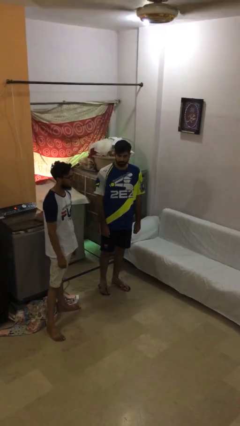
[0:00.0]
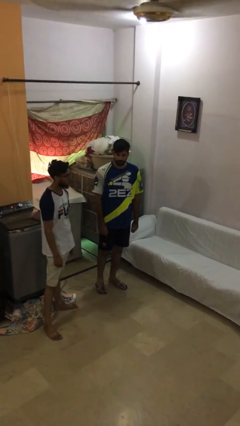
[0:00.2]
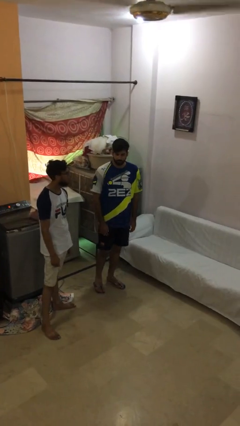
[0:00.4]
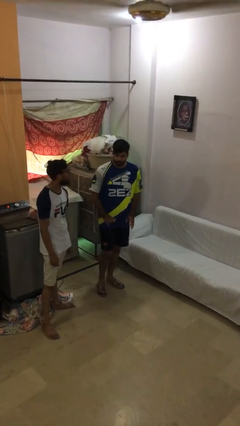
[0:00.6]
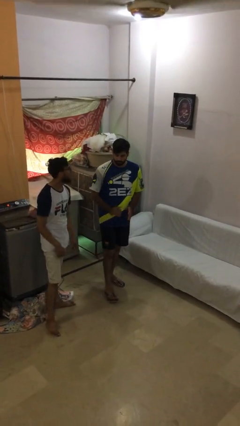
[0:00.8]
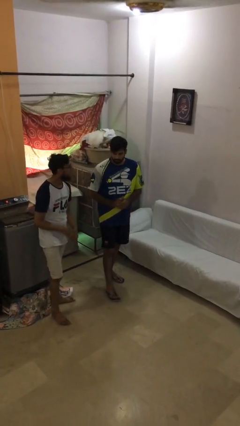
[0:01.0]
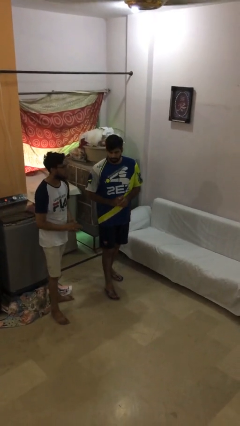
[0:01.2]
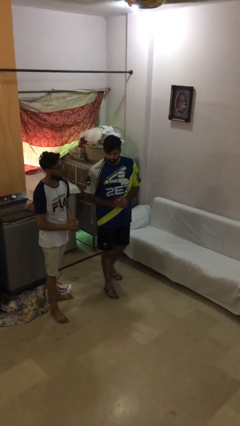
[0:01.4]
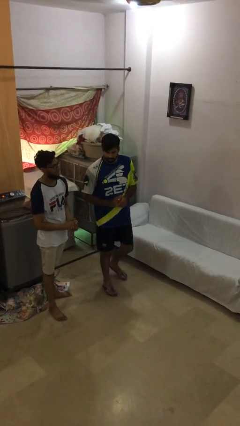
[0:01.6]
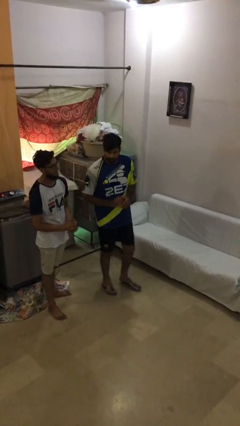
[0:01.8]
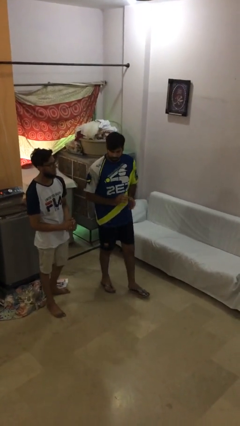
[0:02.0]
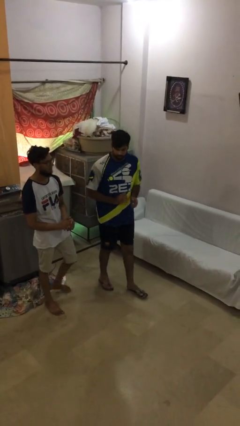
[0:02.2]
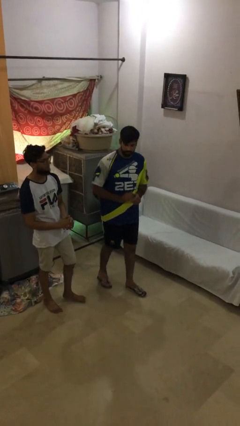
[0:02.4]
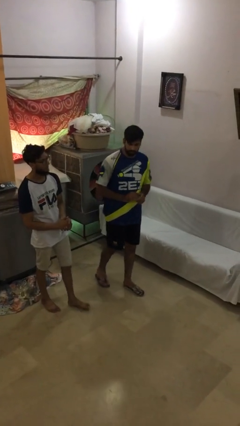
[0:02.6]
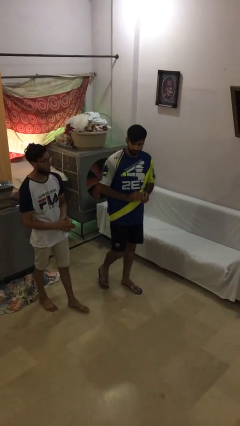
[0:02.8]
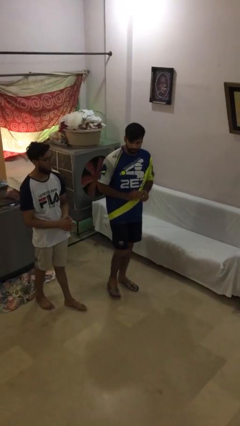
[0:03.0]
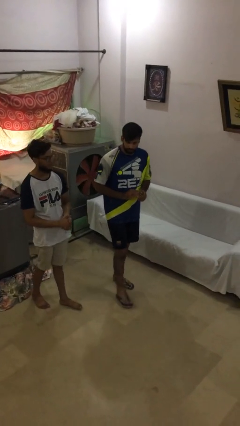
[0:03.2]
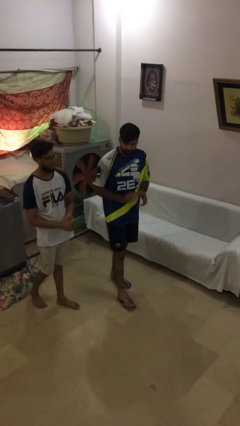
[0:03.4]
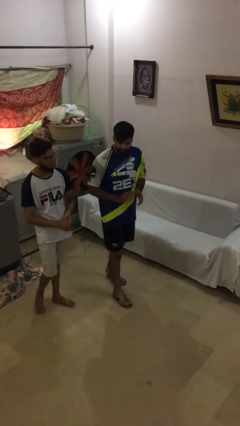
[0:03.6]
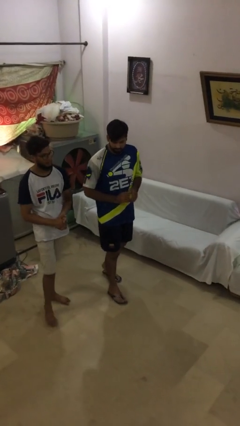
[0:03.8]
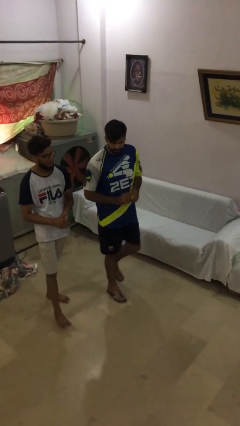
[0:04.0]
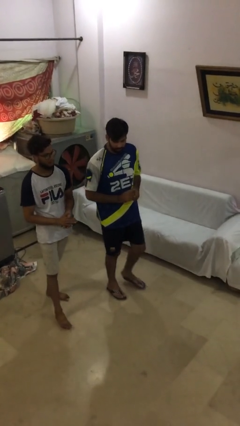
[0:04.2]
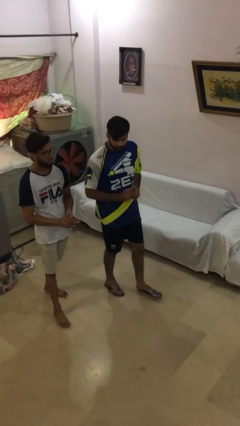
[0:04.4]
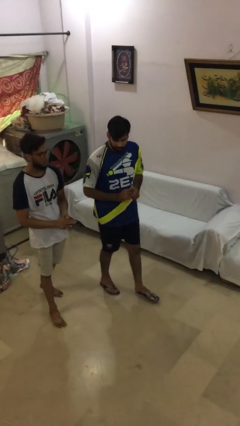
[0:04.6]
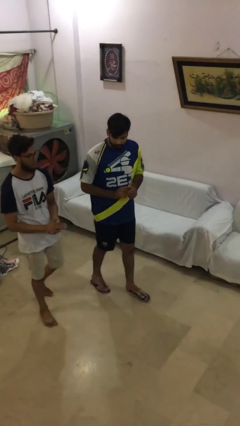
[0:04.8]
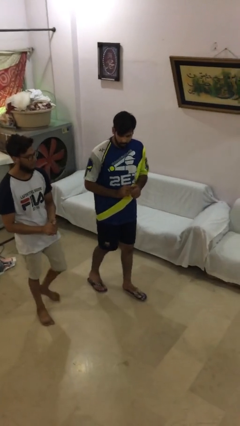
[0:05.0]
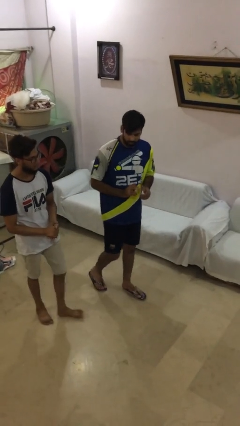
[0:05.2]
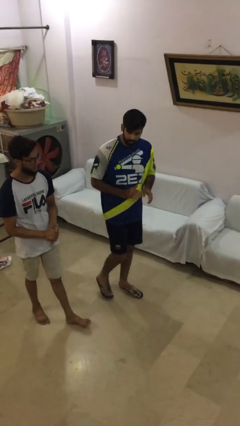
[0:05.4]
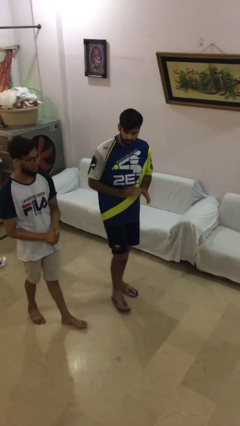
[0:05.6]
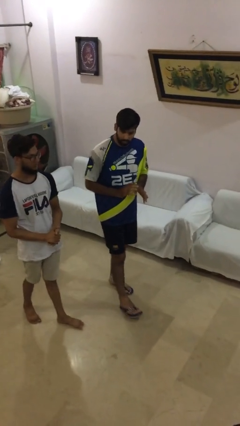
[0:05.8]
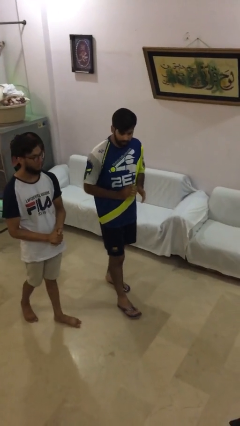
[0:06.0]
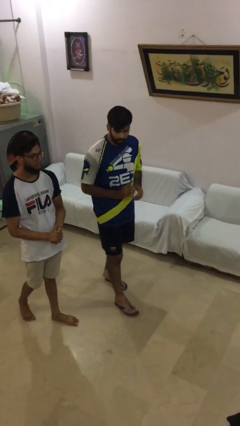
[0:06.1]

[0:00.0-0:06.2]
person talks to person

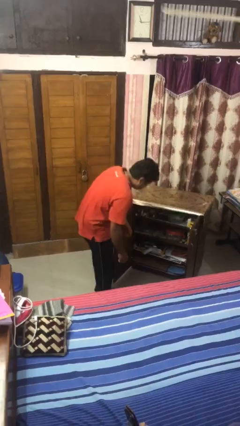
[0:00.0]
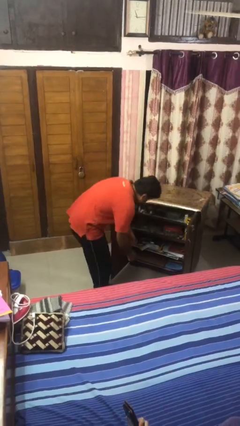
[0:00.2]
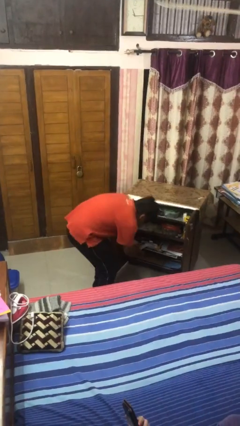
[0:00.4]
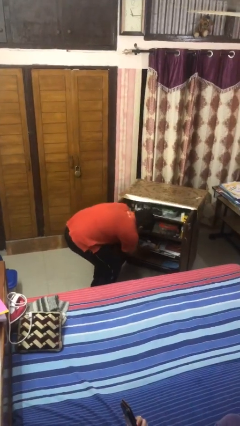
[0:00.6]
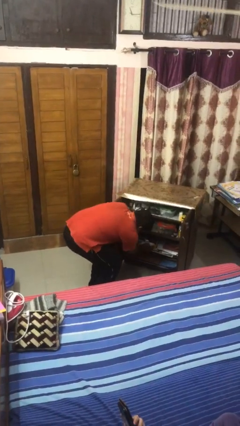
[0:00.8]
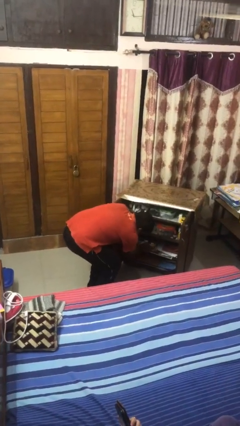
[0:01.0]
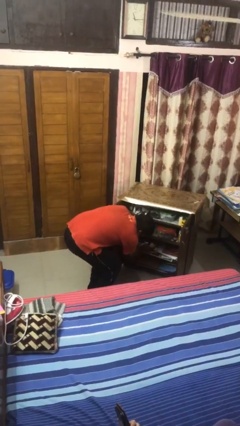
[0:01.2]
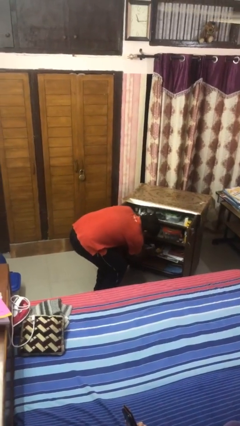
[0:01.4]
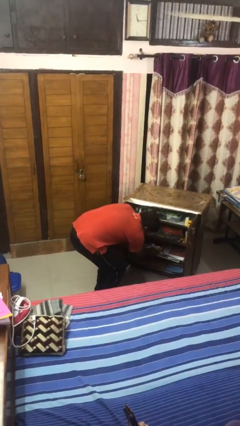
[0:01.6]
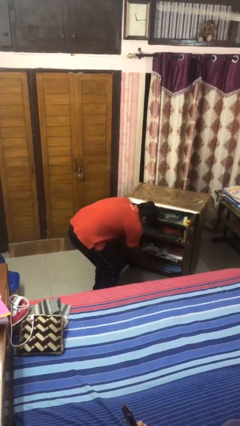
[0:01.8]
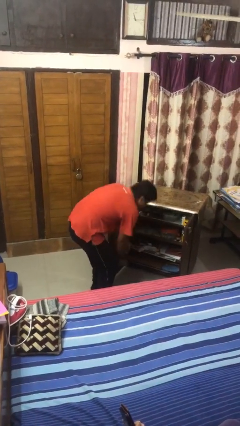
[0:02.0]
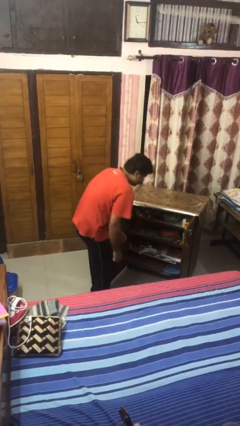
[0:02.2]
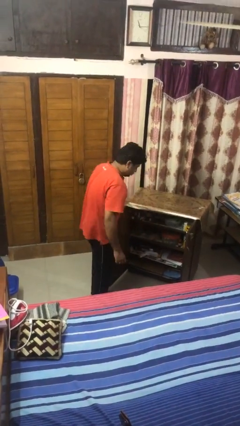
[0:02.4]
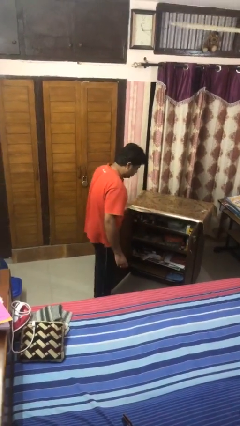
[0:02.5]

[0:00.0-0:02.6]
person searches in cabinet

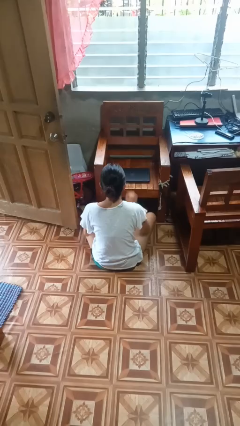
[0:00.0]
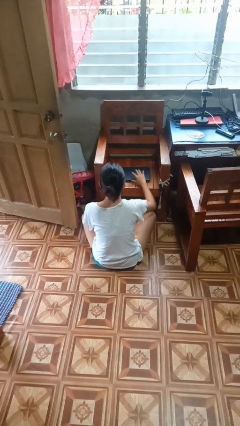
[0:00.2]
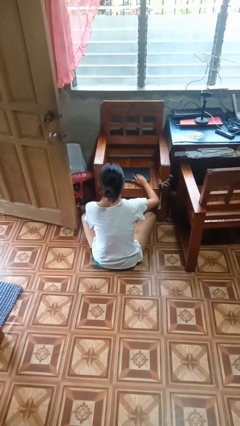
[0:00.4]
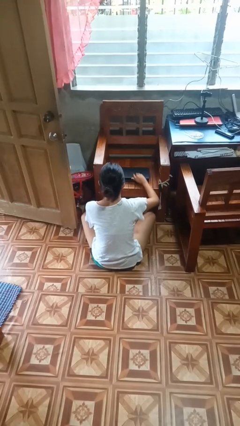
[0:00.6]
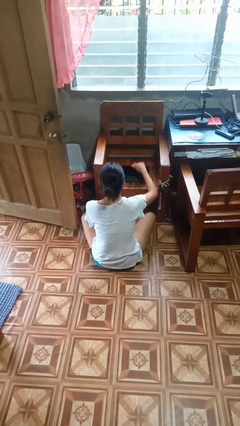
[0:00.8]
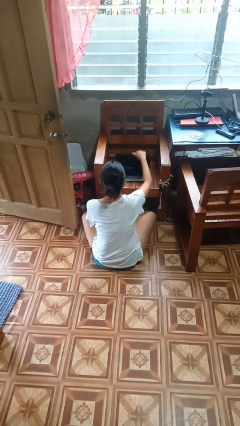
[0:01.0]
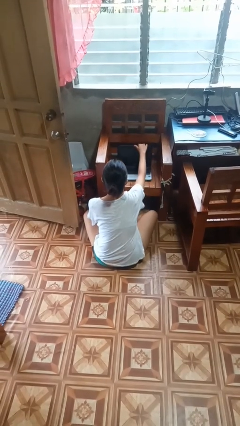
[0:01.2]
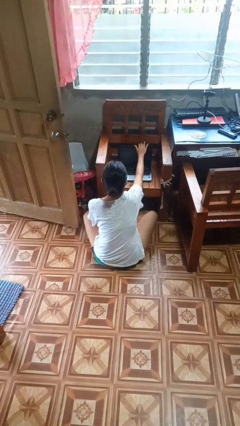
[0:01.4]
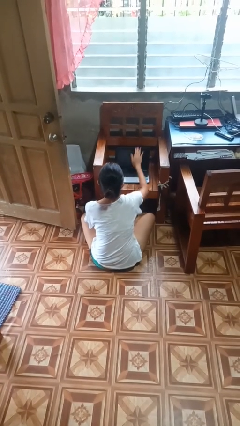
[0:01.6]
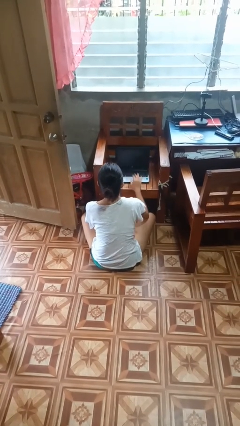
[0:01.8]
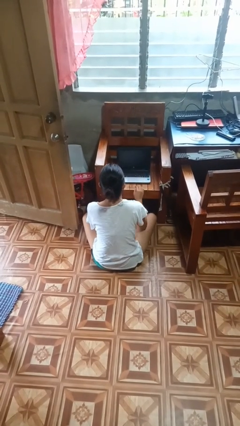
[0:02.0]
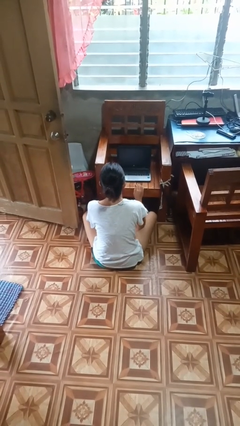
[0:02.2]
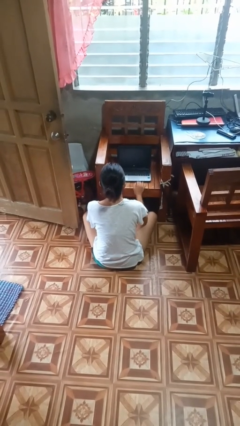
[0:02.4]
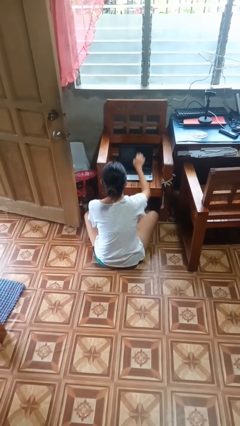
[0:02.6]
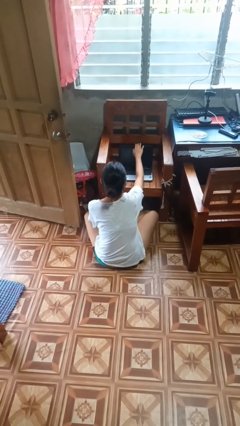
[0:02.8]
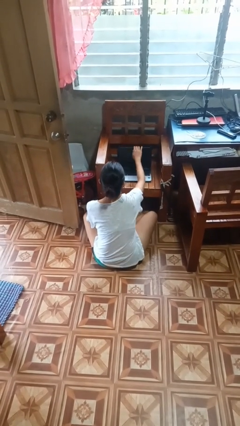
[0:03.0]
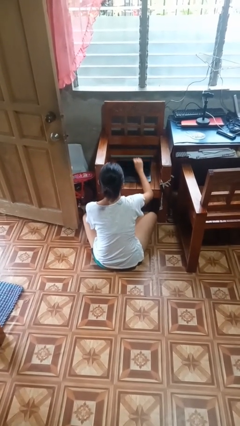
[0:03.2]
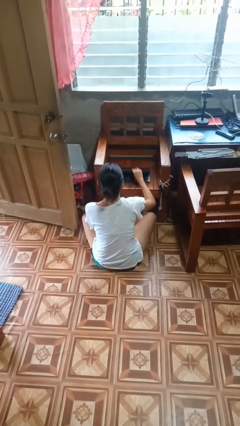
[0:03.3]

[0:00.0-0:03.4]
person opens laptop

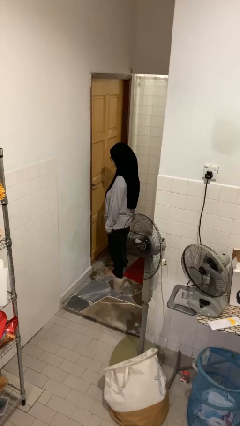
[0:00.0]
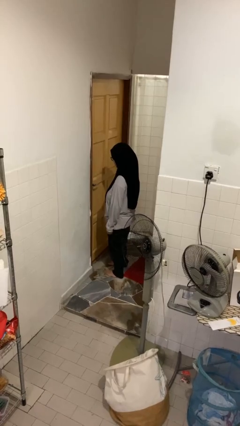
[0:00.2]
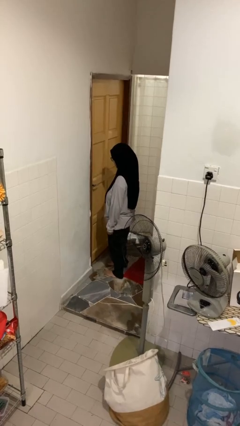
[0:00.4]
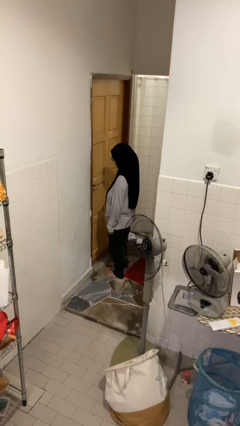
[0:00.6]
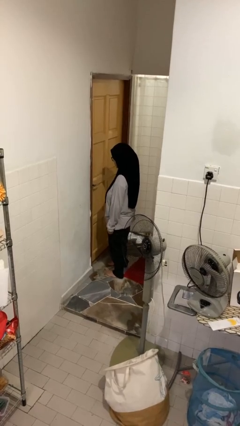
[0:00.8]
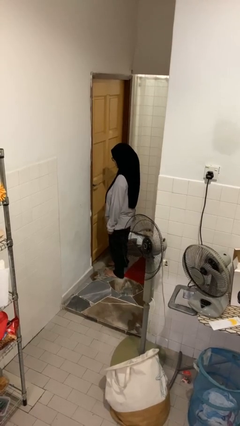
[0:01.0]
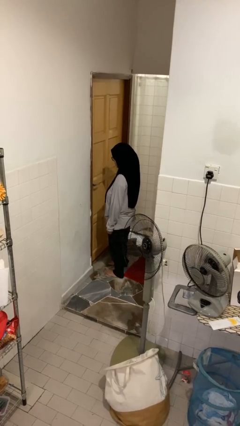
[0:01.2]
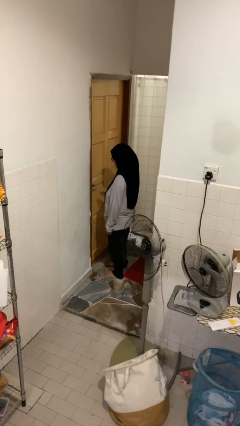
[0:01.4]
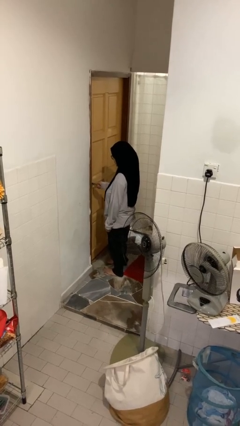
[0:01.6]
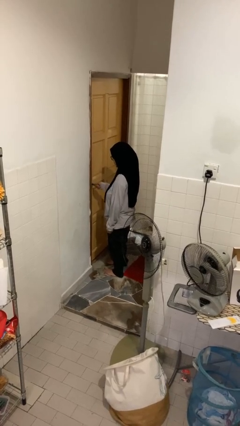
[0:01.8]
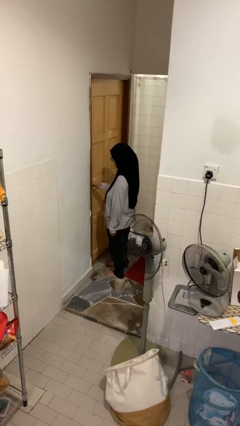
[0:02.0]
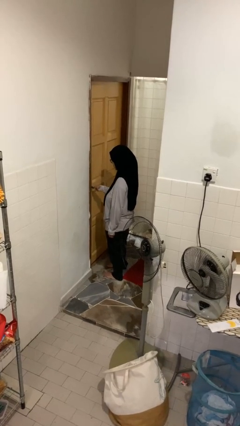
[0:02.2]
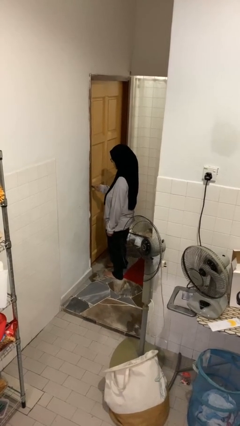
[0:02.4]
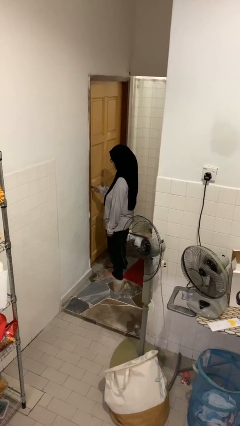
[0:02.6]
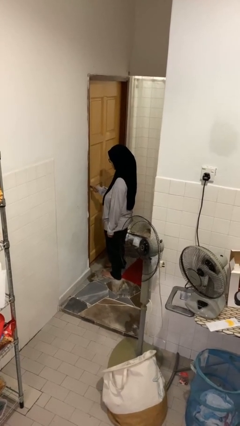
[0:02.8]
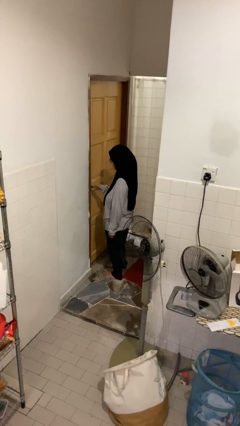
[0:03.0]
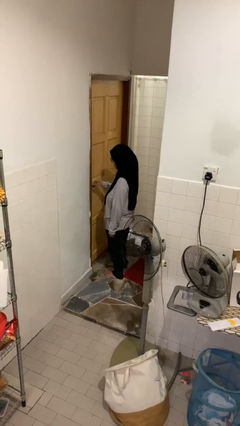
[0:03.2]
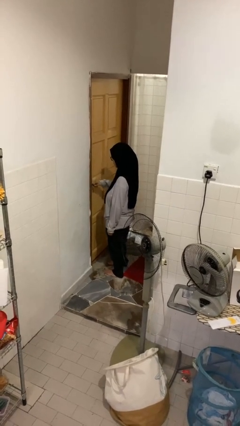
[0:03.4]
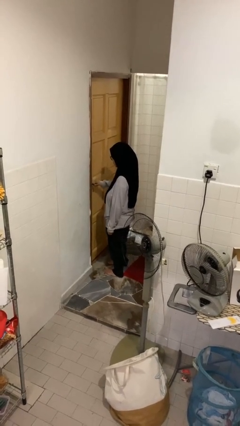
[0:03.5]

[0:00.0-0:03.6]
person unlocks door with keys

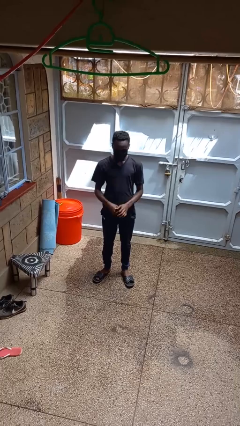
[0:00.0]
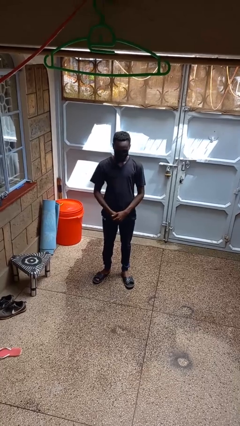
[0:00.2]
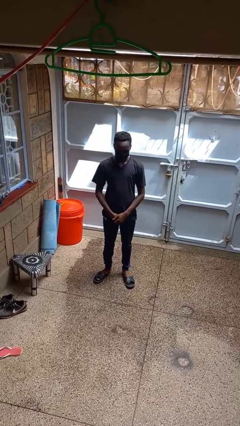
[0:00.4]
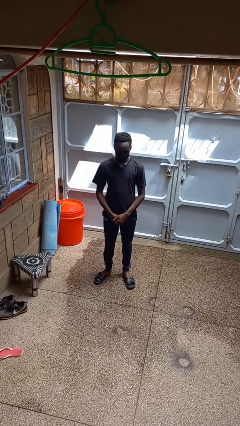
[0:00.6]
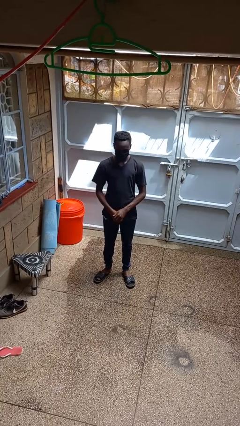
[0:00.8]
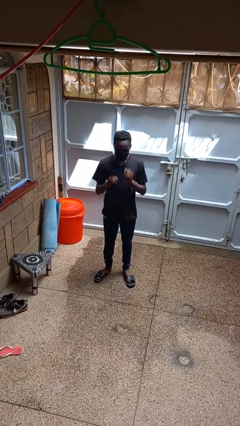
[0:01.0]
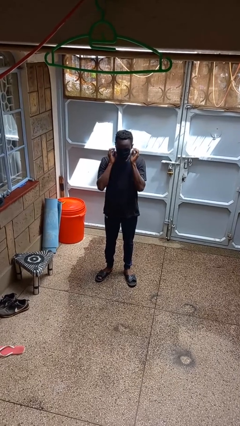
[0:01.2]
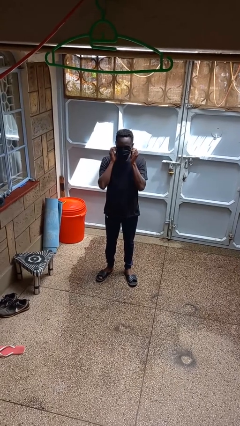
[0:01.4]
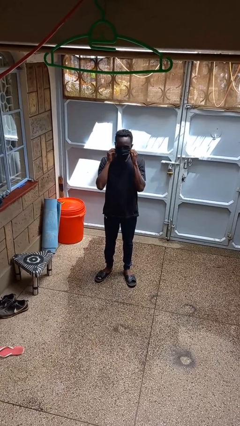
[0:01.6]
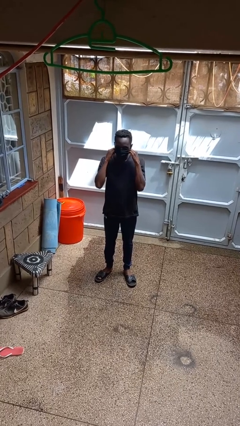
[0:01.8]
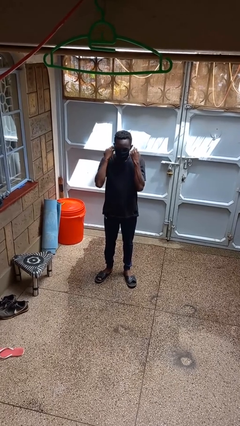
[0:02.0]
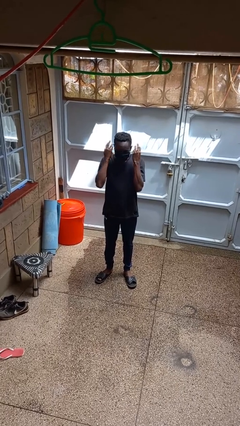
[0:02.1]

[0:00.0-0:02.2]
person takes off facemask
